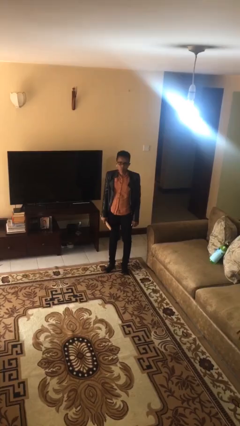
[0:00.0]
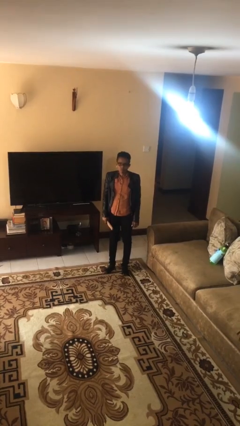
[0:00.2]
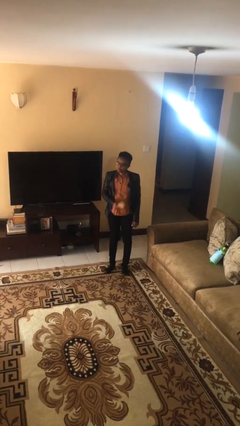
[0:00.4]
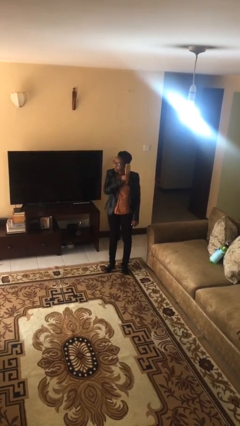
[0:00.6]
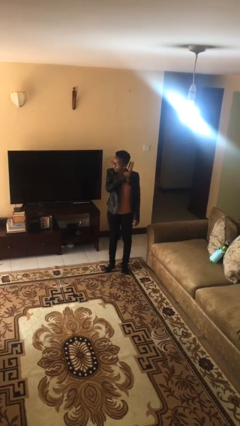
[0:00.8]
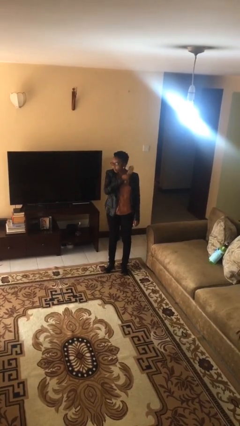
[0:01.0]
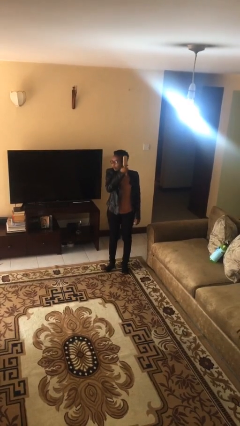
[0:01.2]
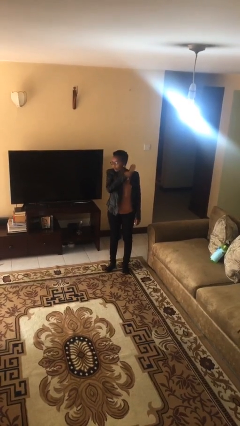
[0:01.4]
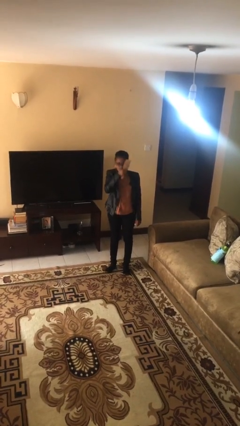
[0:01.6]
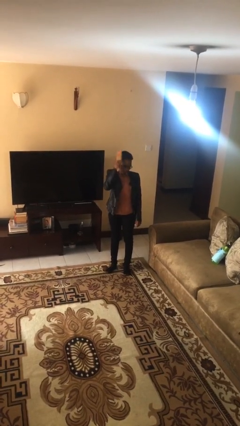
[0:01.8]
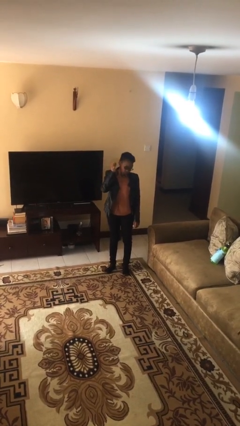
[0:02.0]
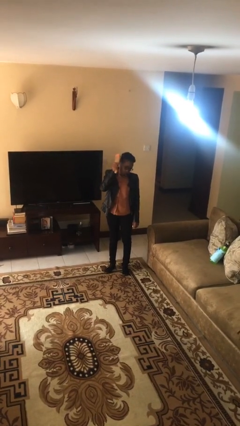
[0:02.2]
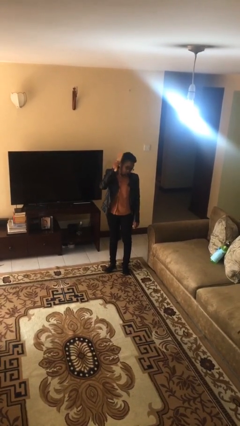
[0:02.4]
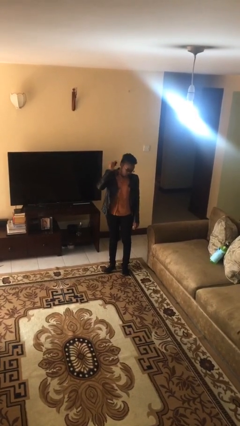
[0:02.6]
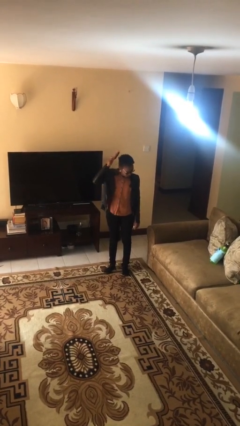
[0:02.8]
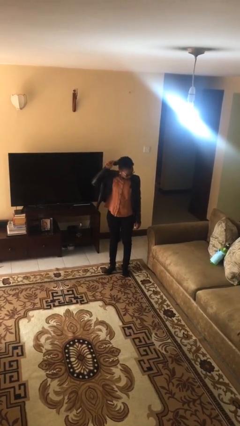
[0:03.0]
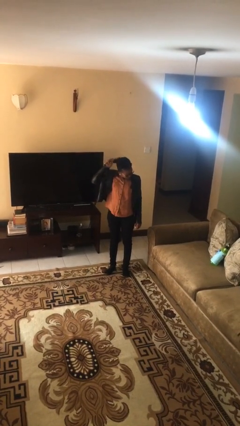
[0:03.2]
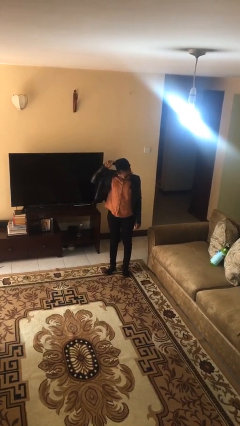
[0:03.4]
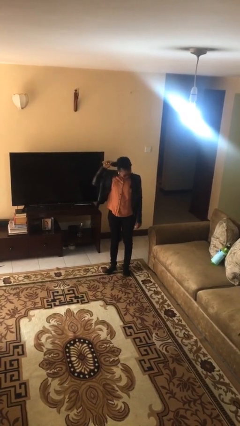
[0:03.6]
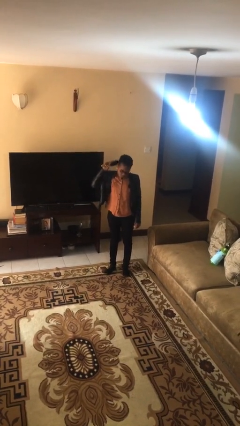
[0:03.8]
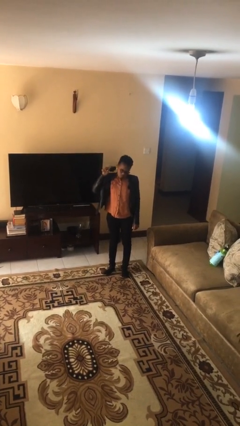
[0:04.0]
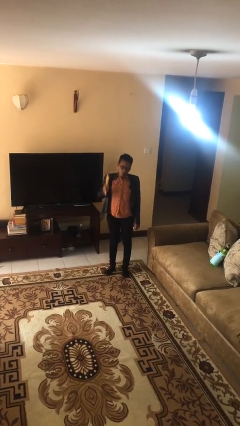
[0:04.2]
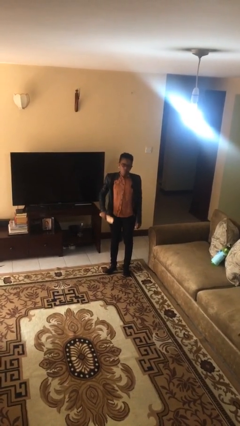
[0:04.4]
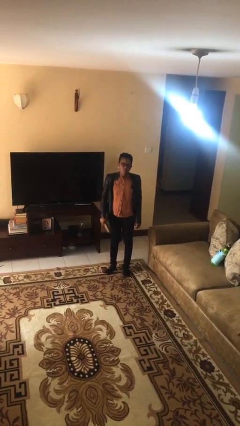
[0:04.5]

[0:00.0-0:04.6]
person brushes hair

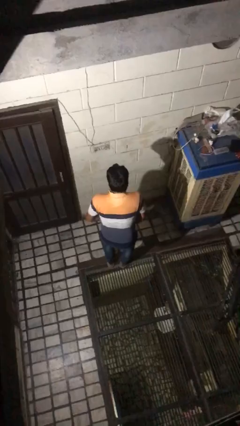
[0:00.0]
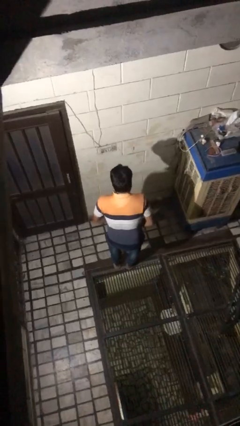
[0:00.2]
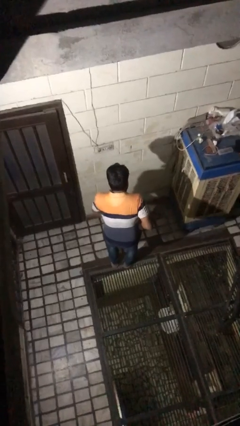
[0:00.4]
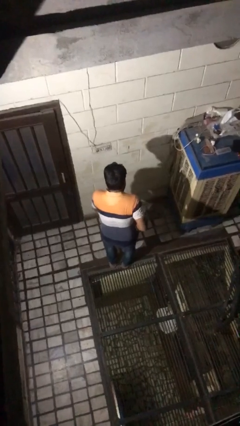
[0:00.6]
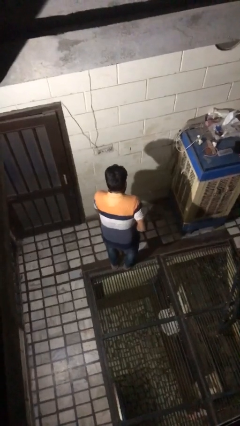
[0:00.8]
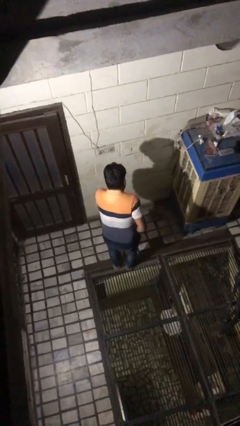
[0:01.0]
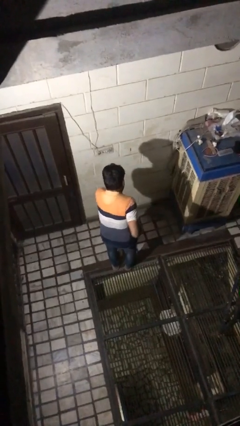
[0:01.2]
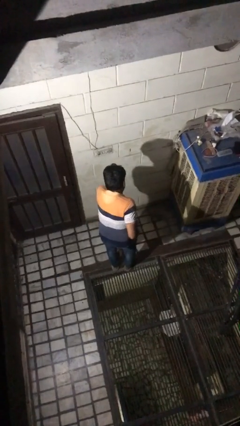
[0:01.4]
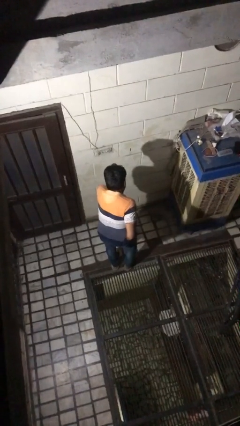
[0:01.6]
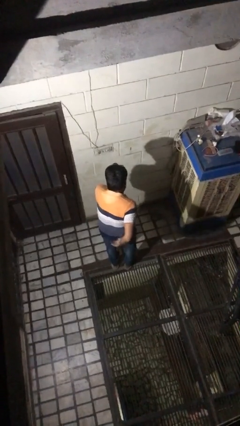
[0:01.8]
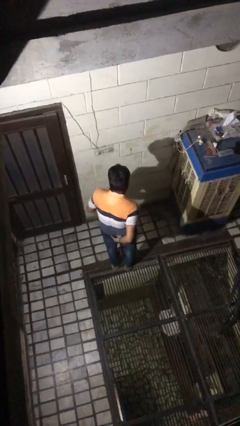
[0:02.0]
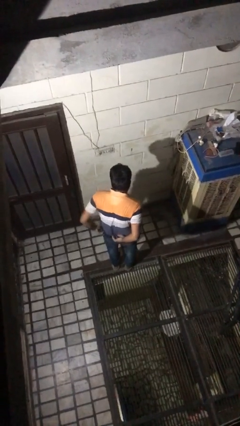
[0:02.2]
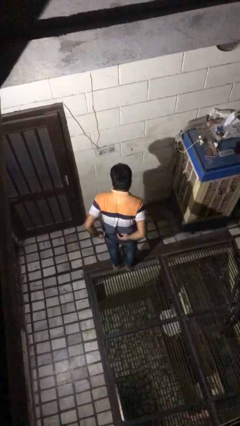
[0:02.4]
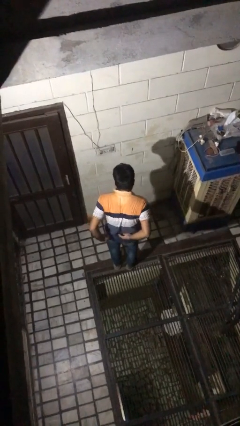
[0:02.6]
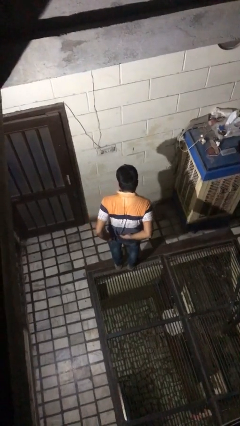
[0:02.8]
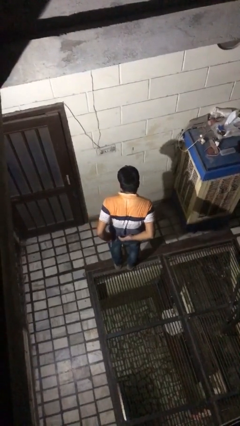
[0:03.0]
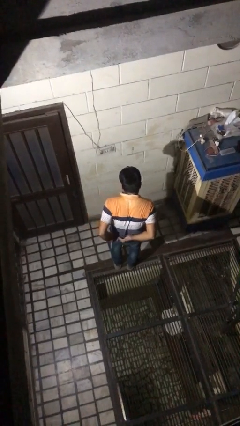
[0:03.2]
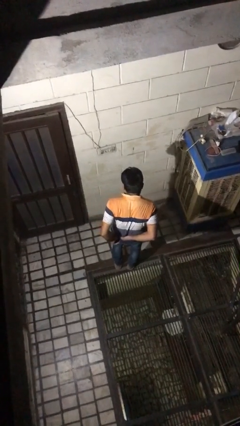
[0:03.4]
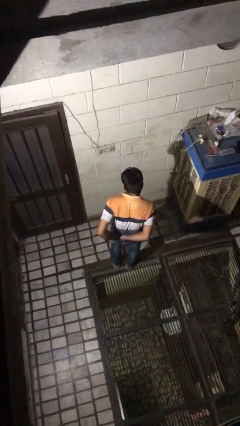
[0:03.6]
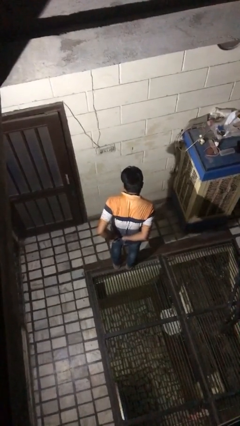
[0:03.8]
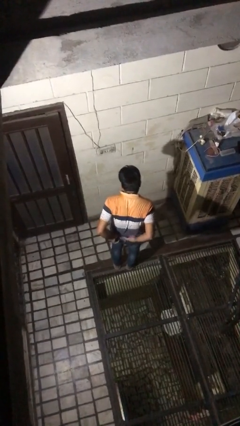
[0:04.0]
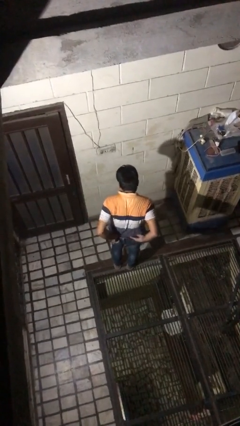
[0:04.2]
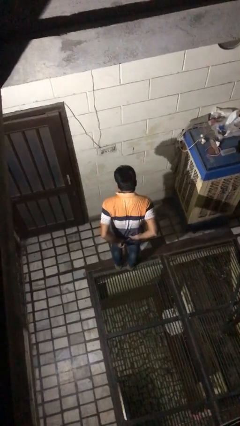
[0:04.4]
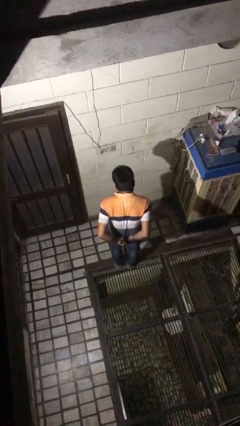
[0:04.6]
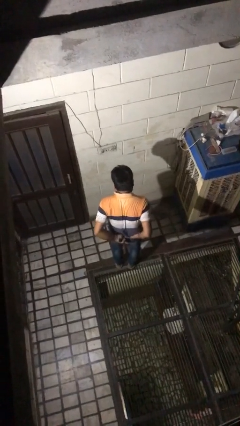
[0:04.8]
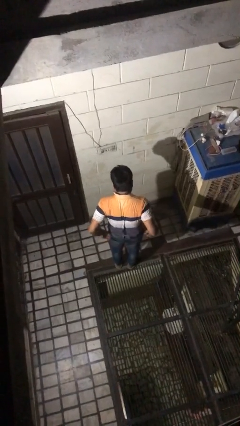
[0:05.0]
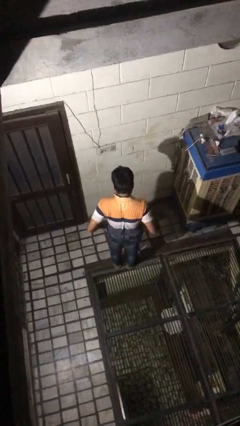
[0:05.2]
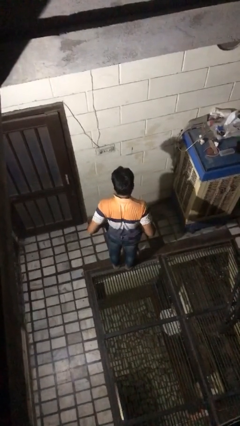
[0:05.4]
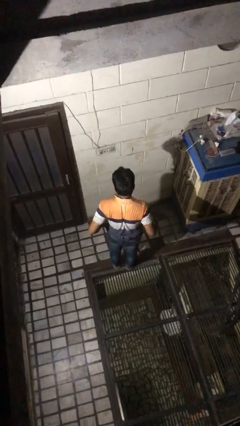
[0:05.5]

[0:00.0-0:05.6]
person tucks in shirt

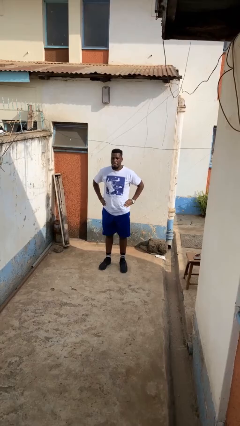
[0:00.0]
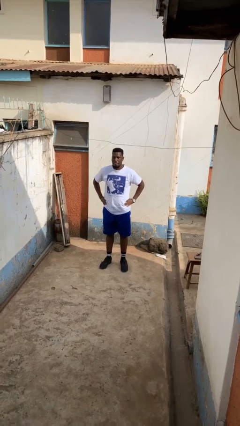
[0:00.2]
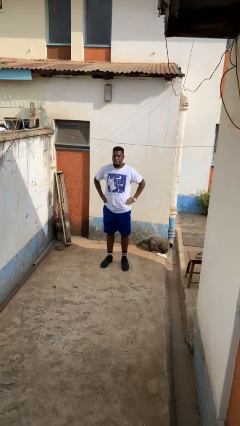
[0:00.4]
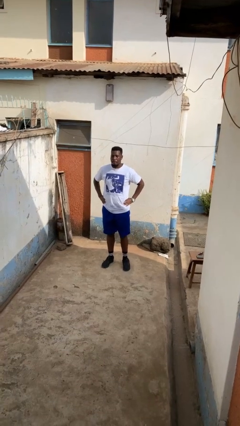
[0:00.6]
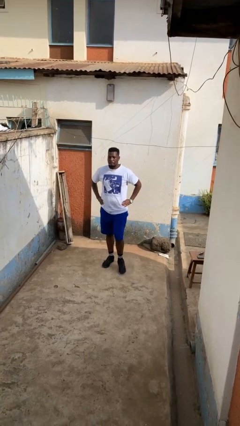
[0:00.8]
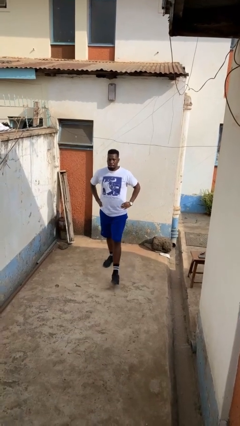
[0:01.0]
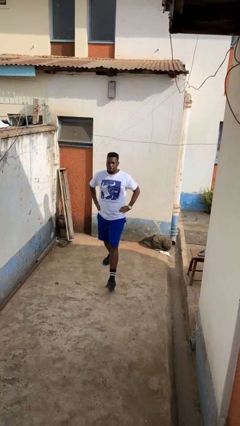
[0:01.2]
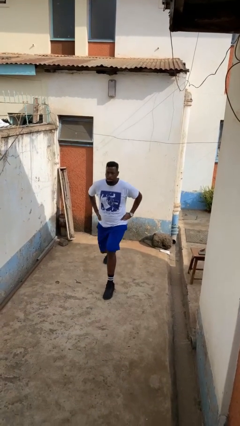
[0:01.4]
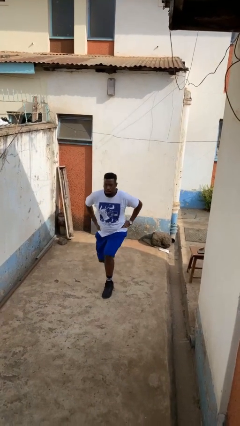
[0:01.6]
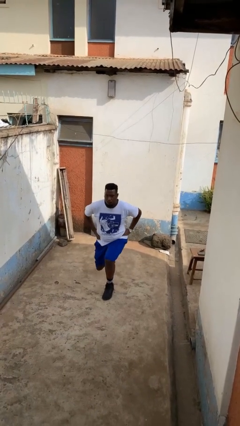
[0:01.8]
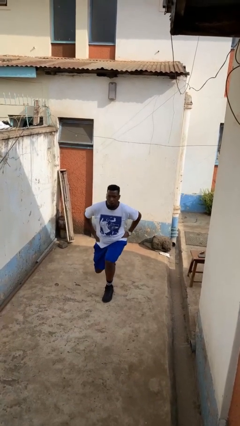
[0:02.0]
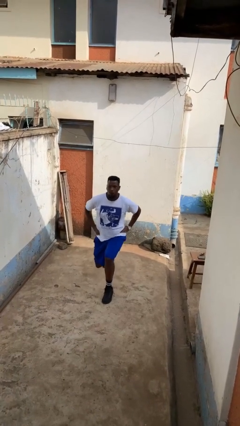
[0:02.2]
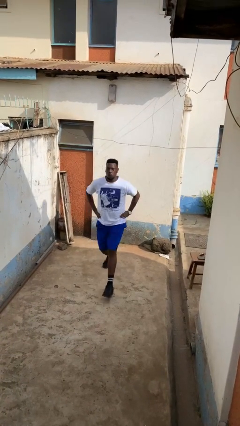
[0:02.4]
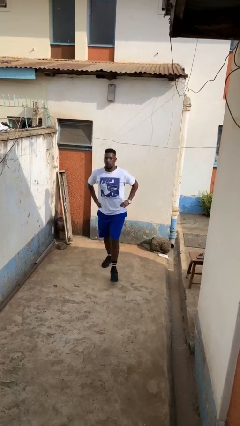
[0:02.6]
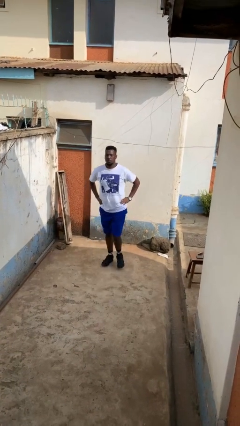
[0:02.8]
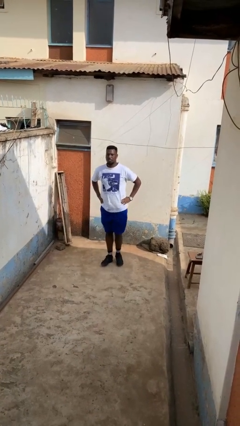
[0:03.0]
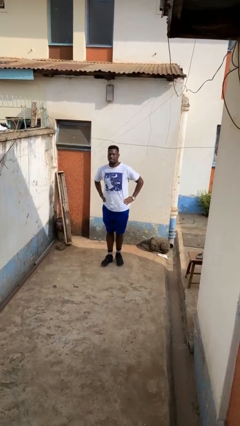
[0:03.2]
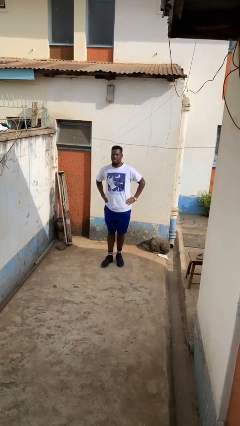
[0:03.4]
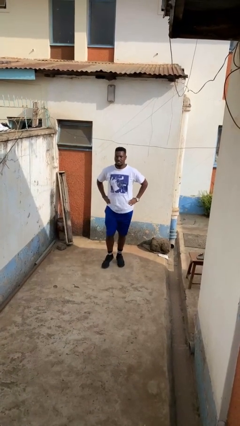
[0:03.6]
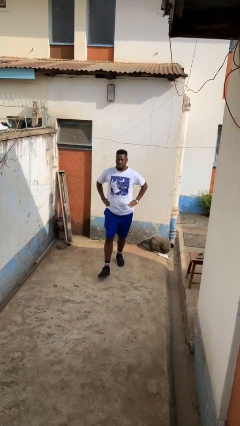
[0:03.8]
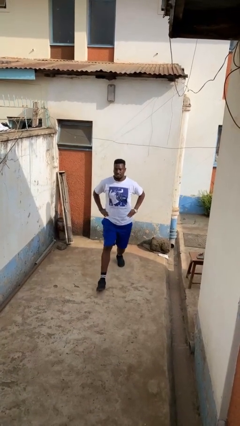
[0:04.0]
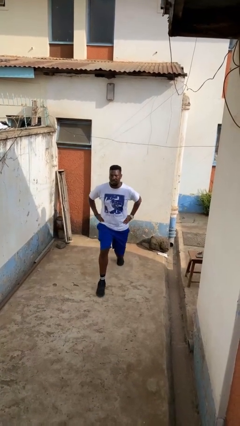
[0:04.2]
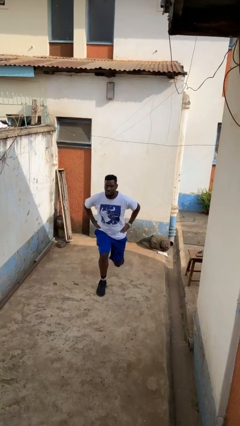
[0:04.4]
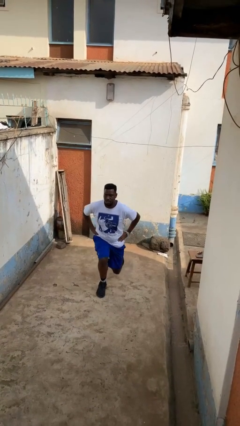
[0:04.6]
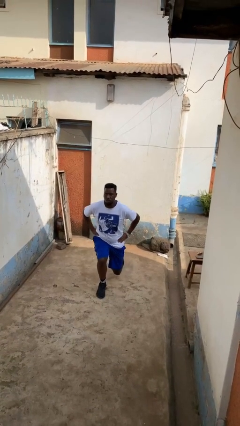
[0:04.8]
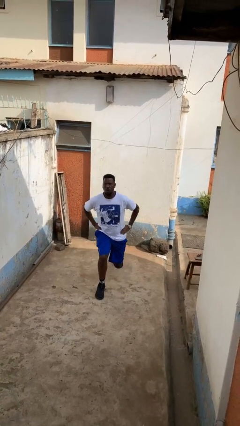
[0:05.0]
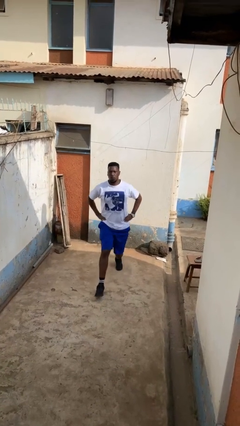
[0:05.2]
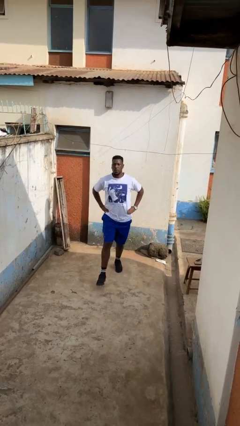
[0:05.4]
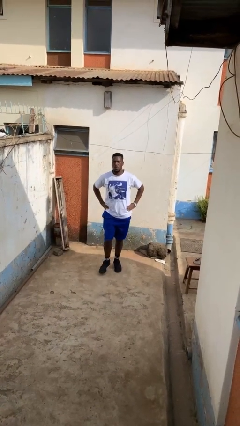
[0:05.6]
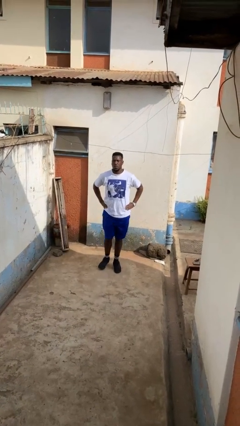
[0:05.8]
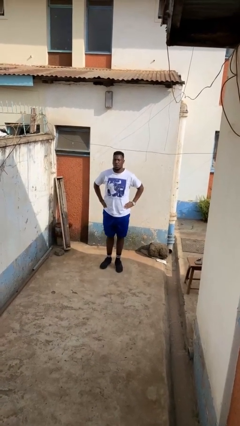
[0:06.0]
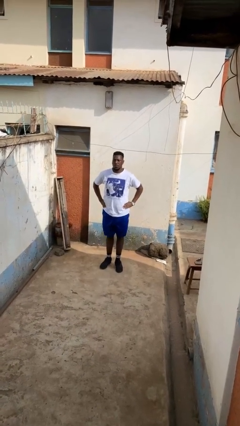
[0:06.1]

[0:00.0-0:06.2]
person exercises with lunges

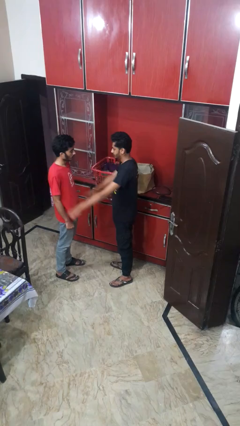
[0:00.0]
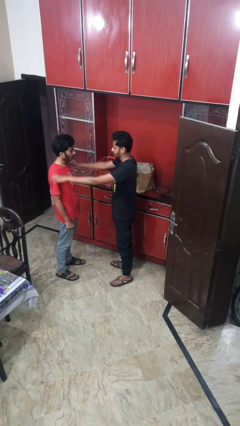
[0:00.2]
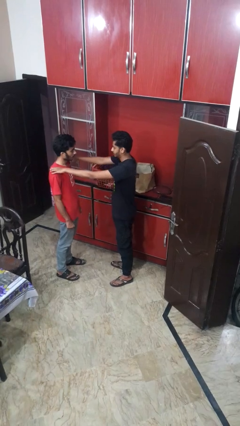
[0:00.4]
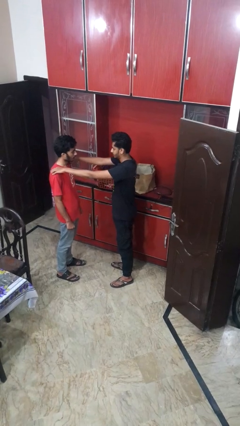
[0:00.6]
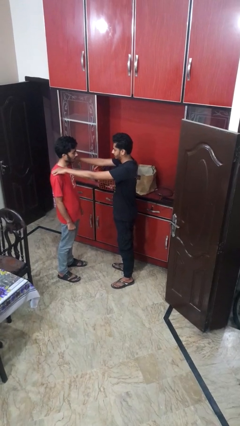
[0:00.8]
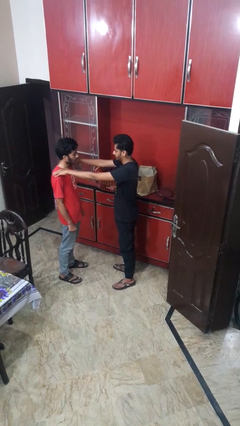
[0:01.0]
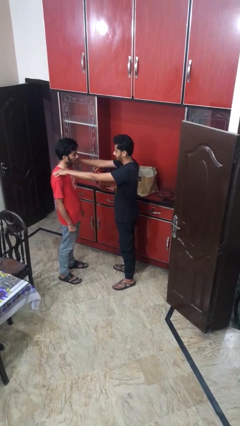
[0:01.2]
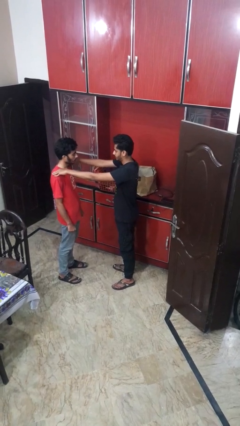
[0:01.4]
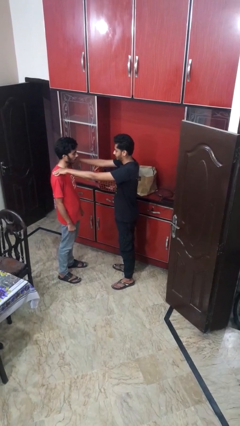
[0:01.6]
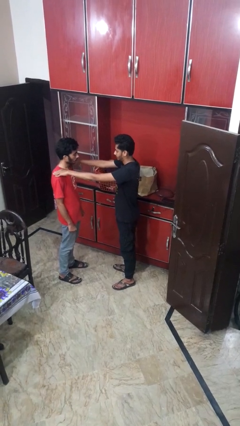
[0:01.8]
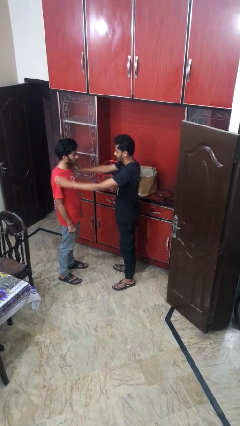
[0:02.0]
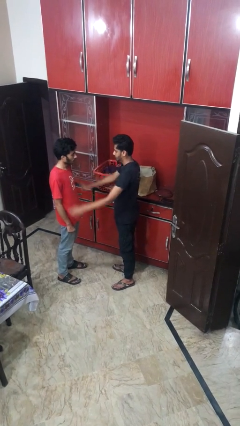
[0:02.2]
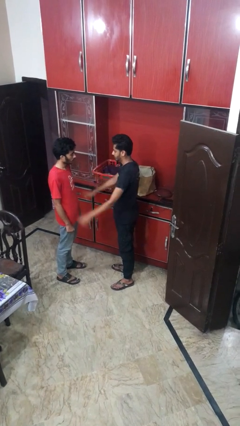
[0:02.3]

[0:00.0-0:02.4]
person pounds shoulders of person
